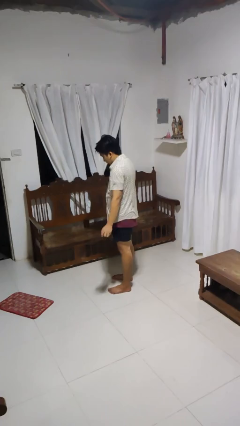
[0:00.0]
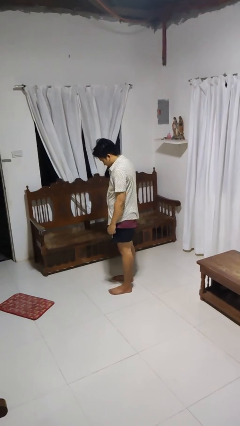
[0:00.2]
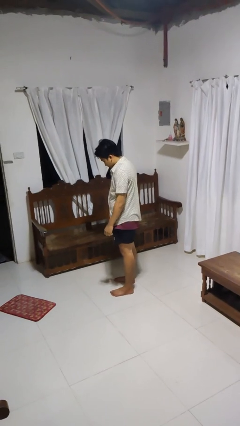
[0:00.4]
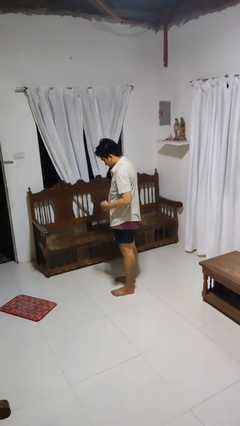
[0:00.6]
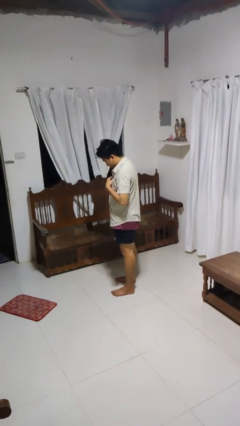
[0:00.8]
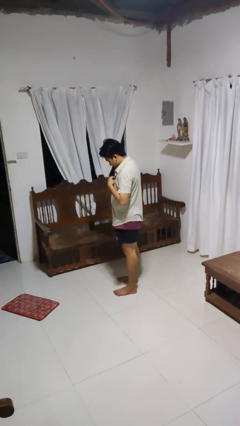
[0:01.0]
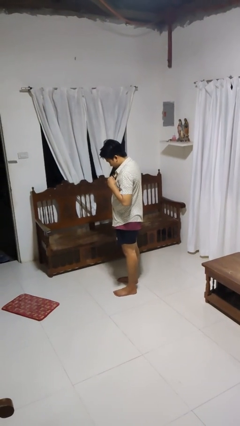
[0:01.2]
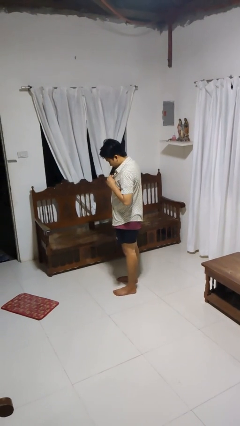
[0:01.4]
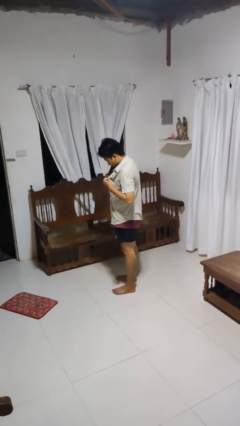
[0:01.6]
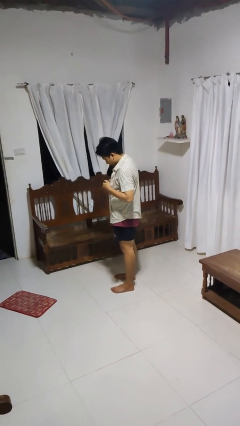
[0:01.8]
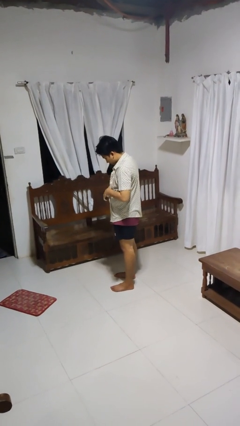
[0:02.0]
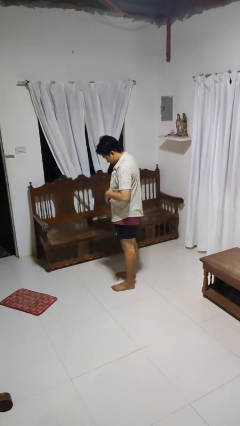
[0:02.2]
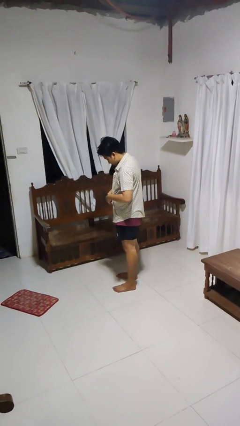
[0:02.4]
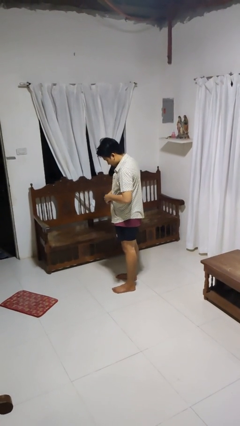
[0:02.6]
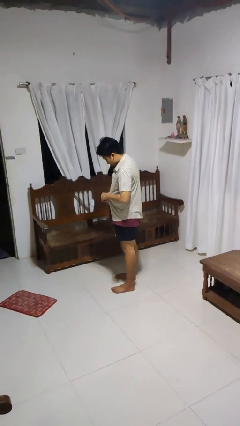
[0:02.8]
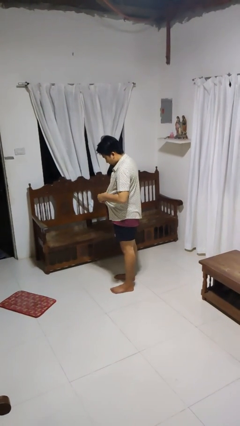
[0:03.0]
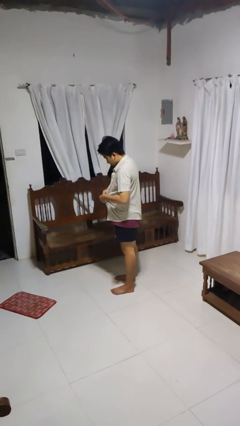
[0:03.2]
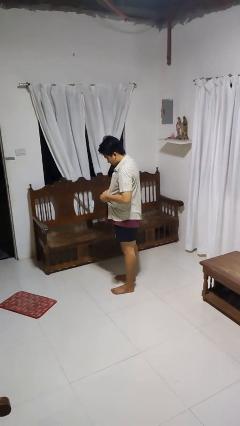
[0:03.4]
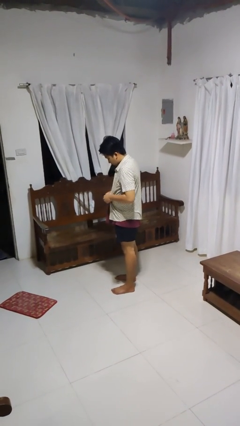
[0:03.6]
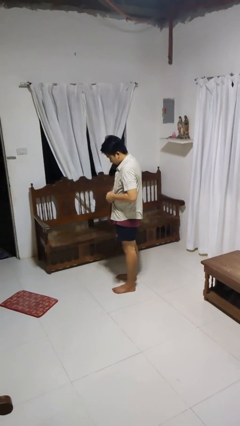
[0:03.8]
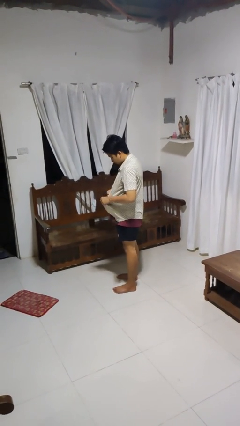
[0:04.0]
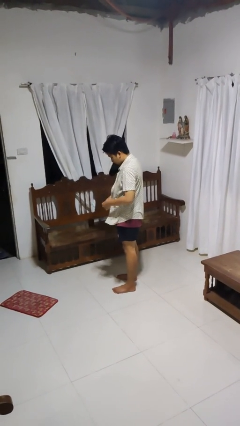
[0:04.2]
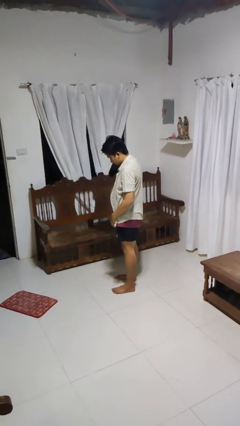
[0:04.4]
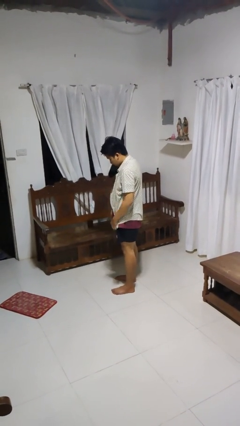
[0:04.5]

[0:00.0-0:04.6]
person unbuttons shirt

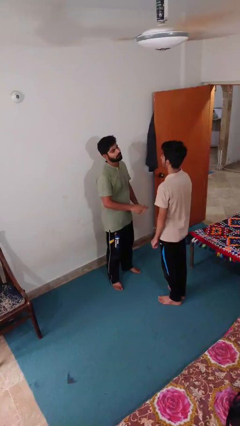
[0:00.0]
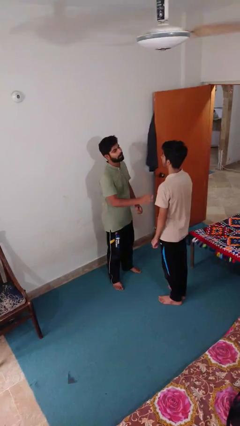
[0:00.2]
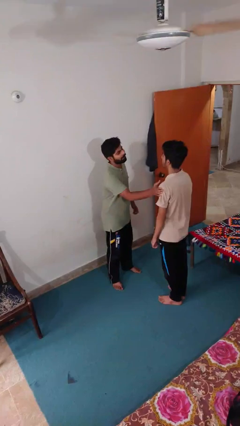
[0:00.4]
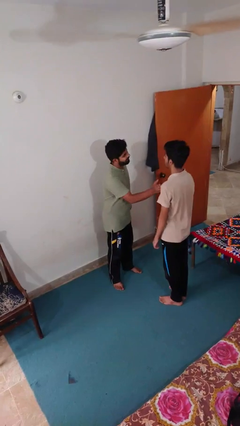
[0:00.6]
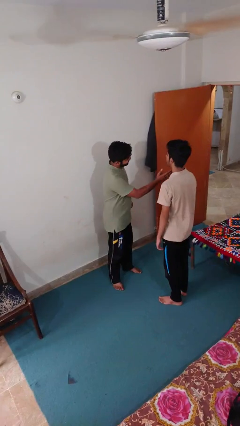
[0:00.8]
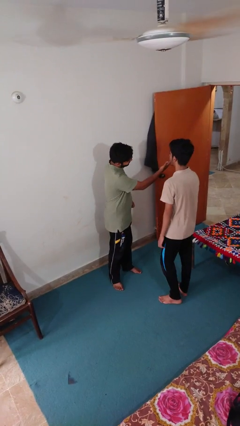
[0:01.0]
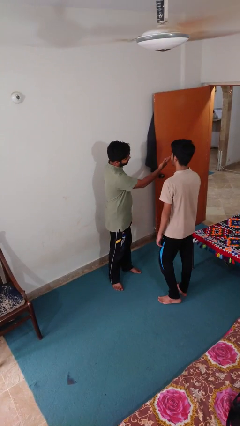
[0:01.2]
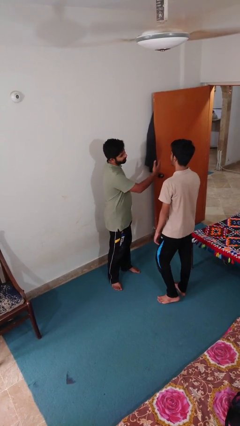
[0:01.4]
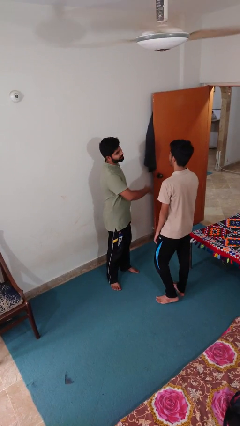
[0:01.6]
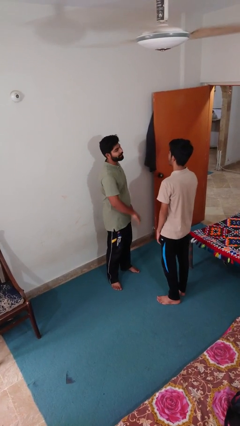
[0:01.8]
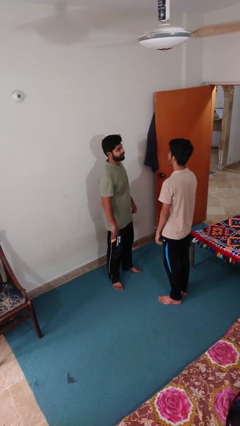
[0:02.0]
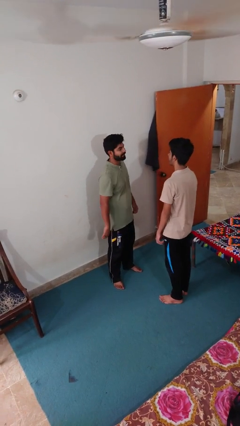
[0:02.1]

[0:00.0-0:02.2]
person shoves person

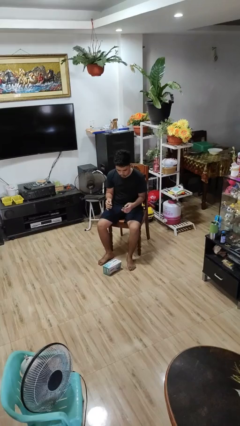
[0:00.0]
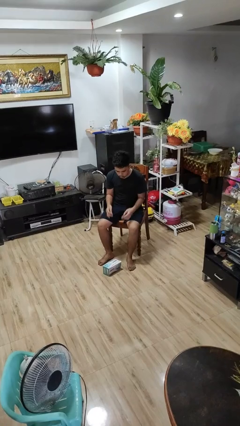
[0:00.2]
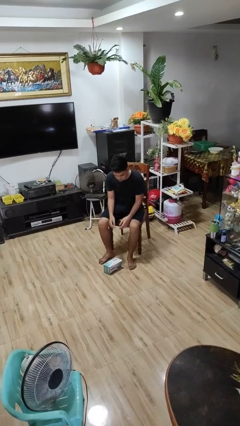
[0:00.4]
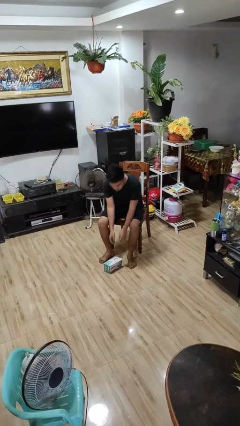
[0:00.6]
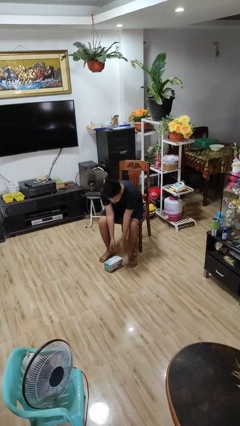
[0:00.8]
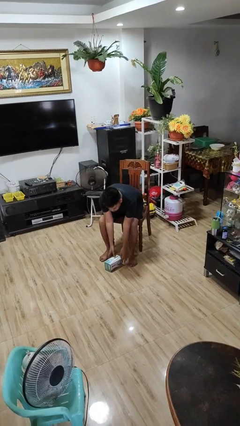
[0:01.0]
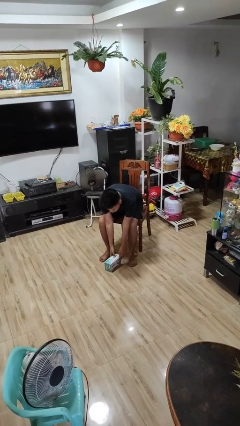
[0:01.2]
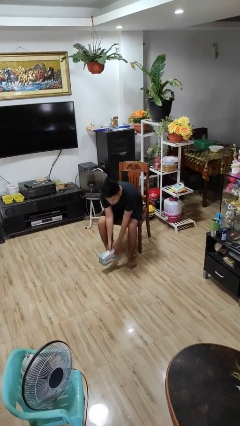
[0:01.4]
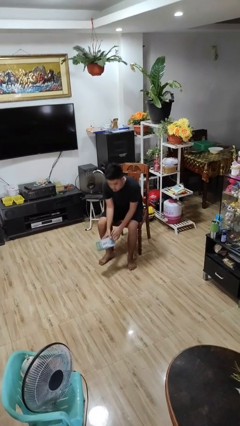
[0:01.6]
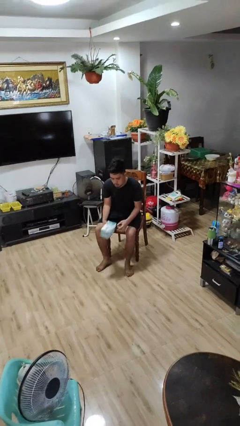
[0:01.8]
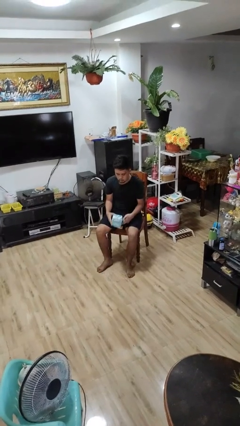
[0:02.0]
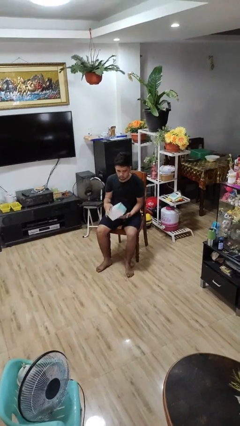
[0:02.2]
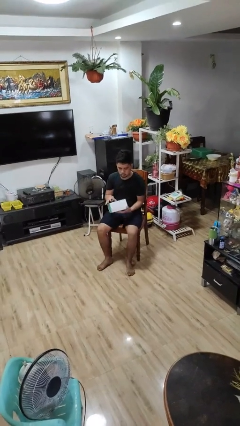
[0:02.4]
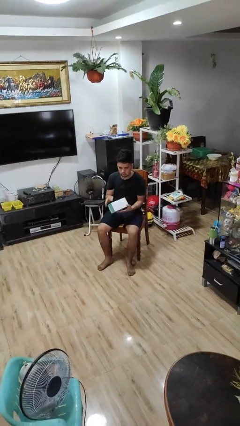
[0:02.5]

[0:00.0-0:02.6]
person picks up object from floor

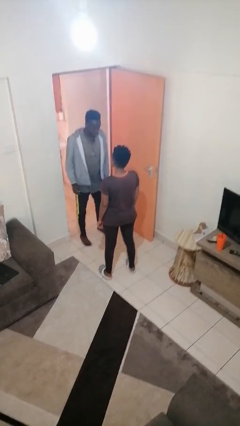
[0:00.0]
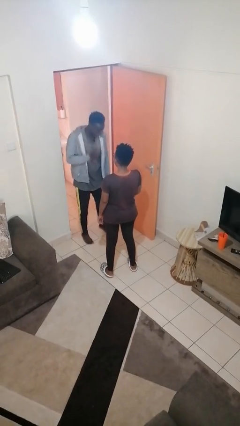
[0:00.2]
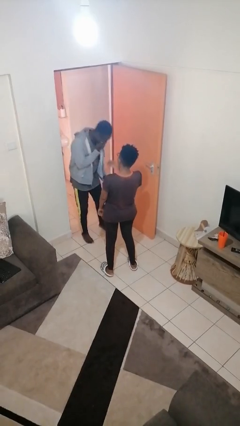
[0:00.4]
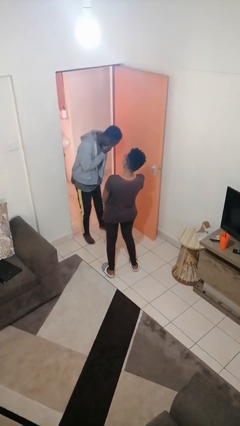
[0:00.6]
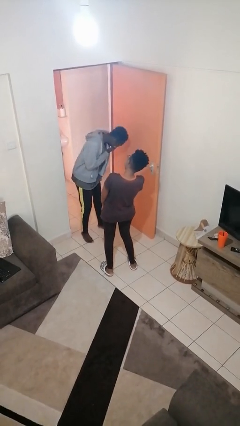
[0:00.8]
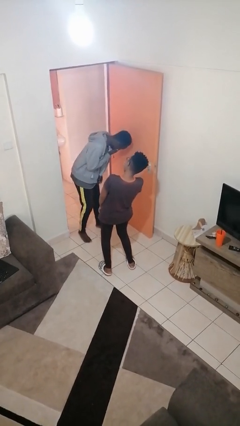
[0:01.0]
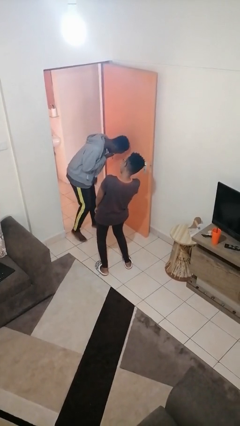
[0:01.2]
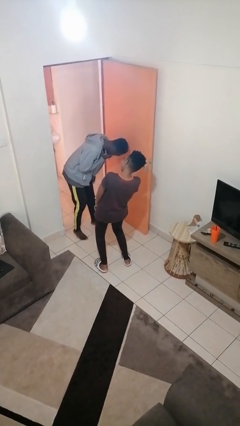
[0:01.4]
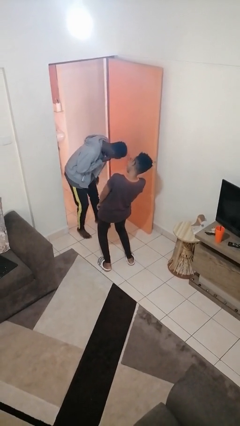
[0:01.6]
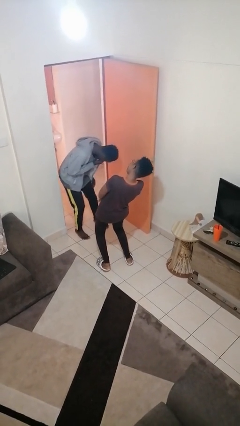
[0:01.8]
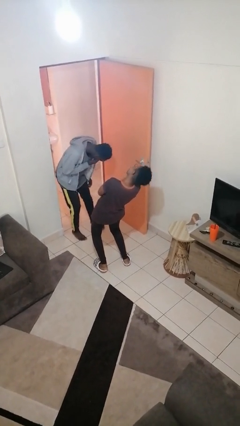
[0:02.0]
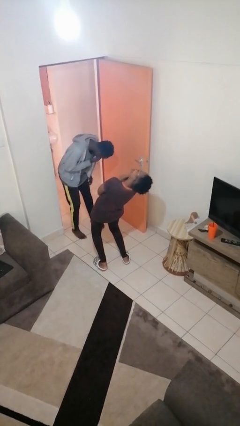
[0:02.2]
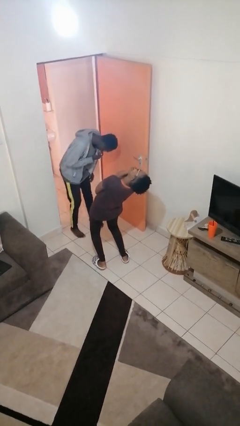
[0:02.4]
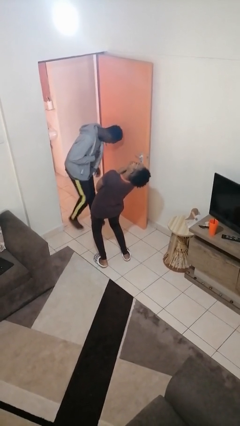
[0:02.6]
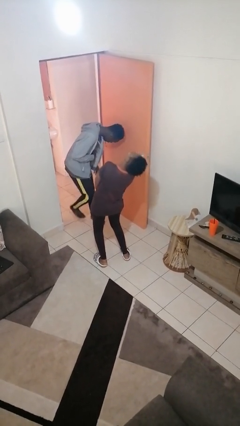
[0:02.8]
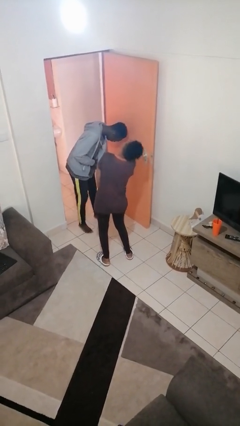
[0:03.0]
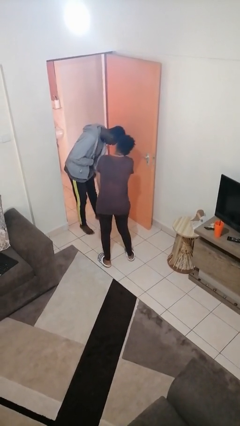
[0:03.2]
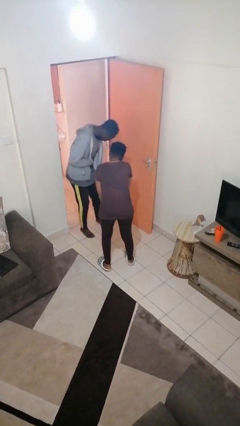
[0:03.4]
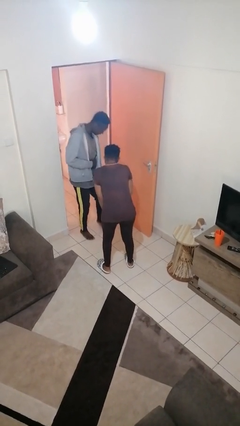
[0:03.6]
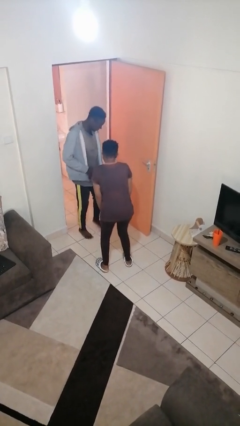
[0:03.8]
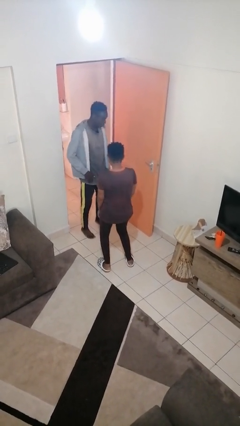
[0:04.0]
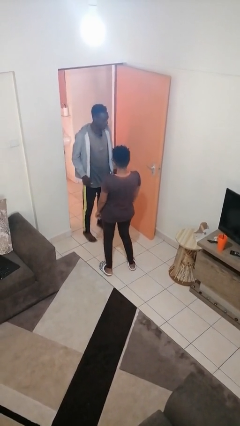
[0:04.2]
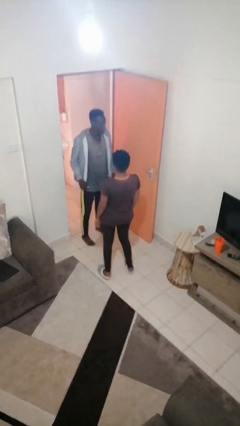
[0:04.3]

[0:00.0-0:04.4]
person laughs with person

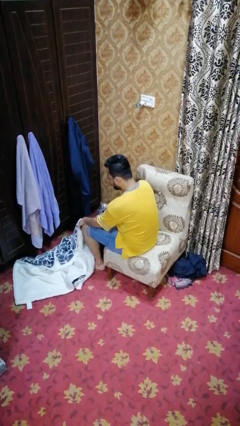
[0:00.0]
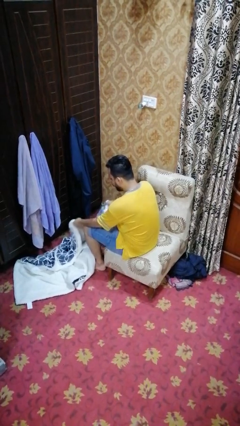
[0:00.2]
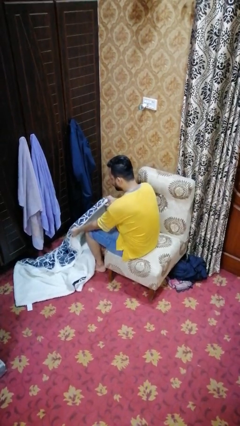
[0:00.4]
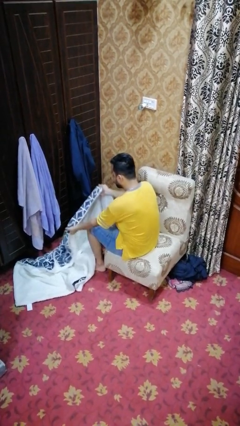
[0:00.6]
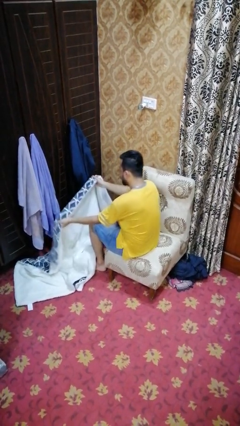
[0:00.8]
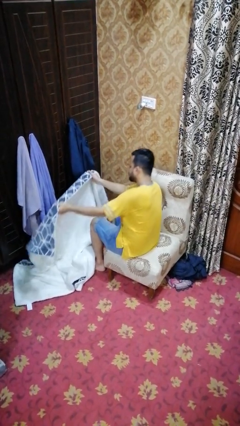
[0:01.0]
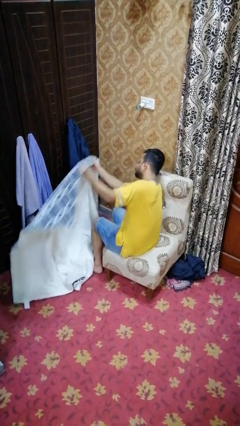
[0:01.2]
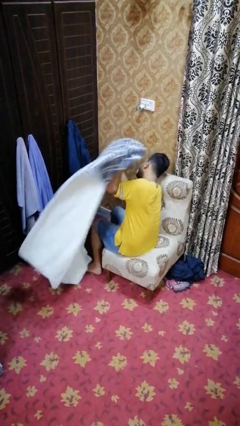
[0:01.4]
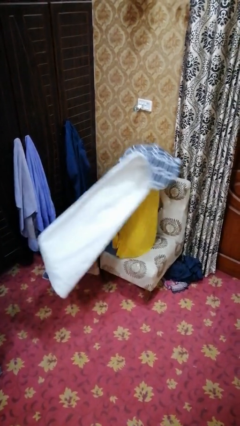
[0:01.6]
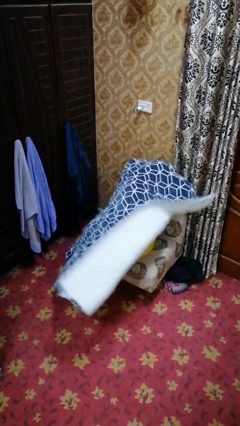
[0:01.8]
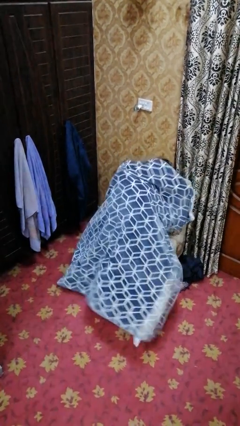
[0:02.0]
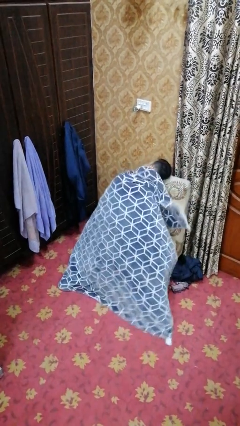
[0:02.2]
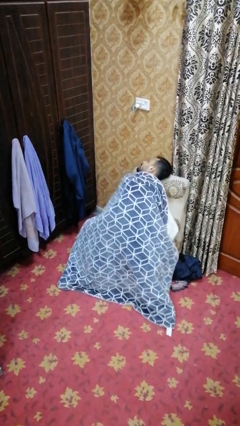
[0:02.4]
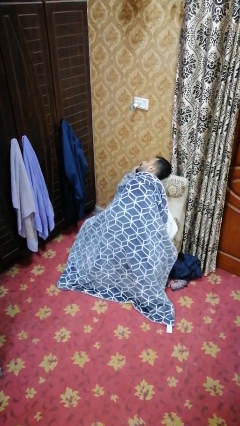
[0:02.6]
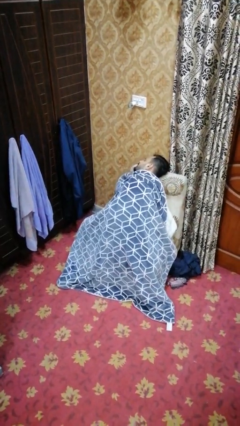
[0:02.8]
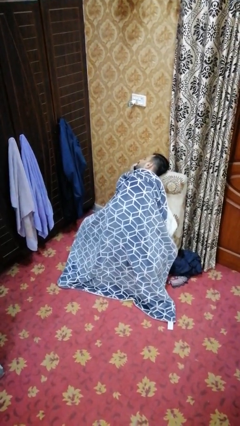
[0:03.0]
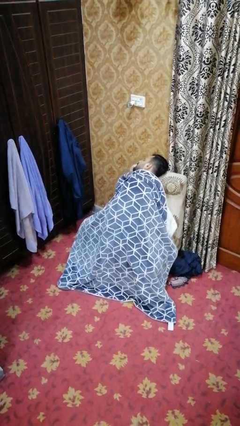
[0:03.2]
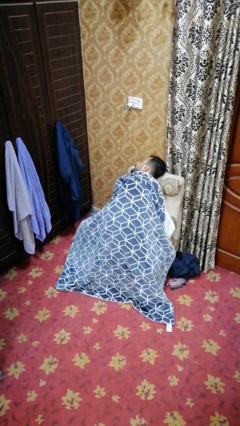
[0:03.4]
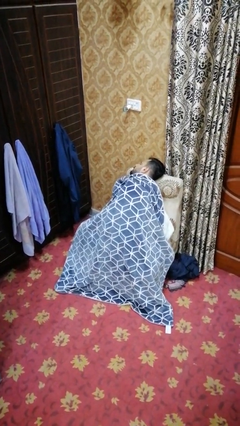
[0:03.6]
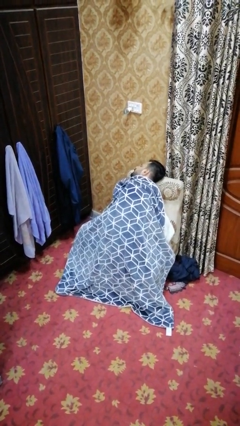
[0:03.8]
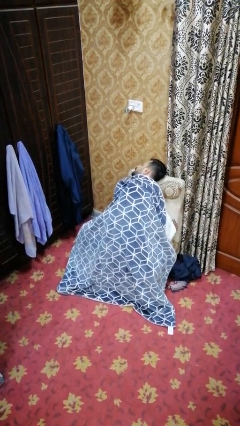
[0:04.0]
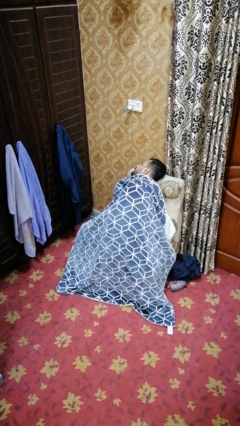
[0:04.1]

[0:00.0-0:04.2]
person covers with blanket
